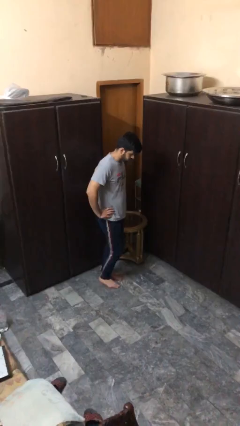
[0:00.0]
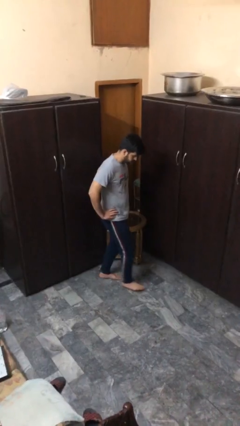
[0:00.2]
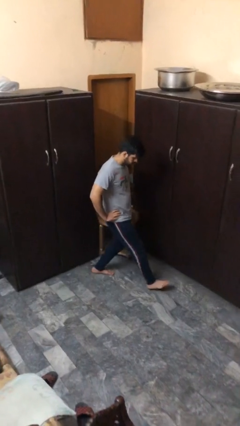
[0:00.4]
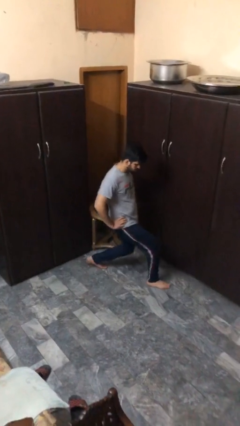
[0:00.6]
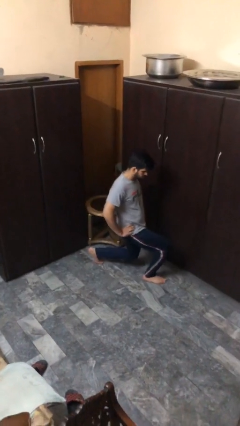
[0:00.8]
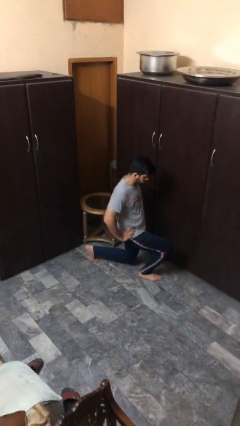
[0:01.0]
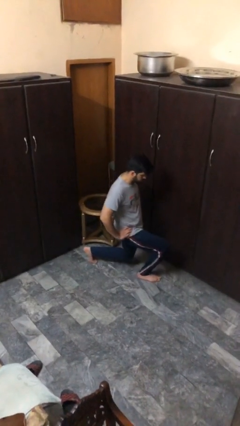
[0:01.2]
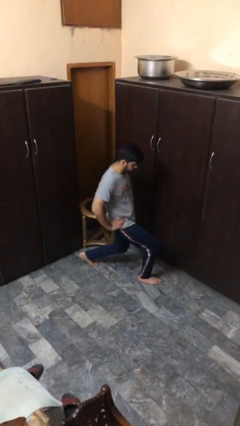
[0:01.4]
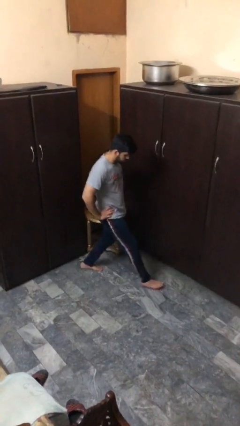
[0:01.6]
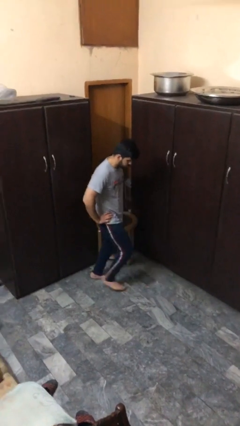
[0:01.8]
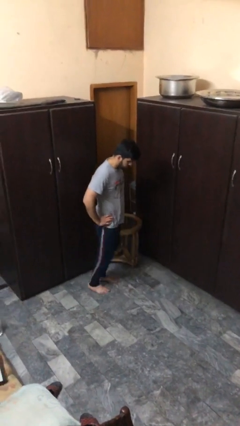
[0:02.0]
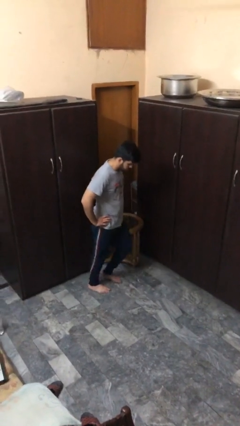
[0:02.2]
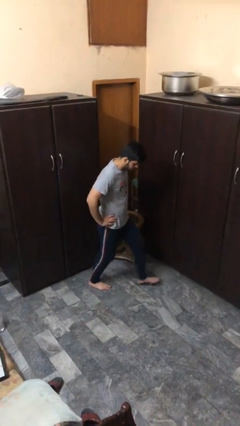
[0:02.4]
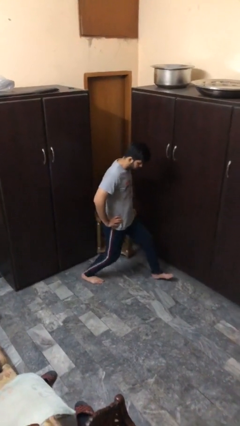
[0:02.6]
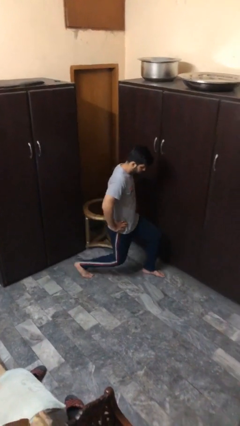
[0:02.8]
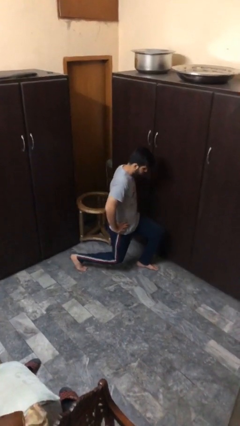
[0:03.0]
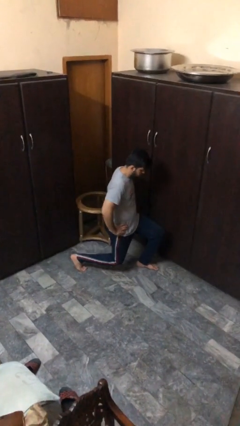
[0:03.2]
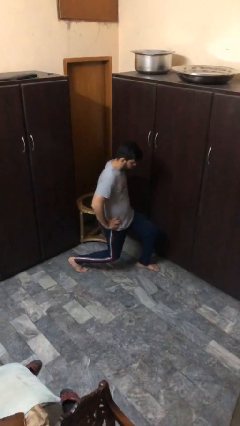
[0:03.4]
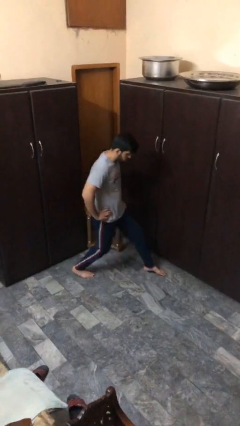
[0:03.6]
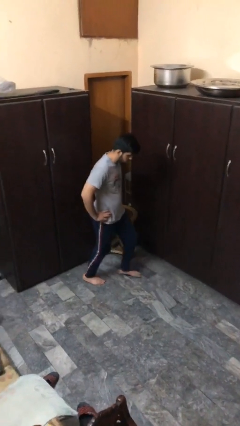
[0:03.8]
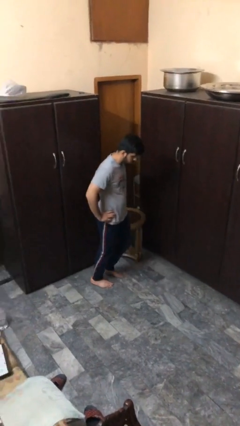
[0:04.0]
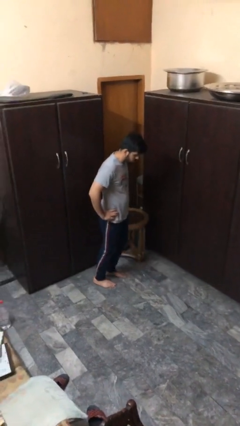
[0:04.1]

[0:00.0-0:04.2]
person exercises with lunges

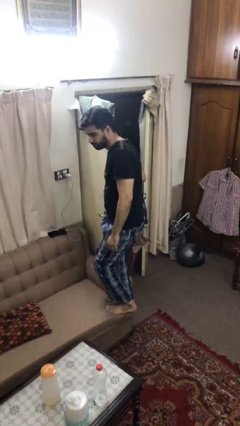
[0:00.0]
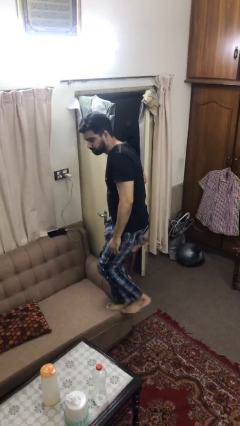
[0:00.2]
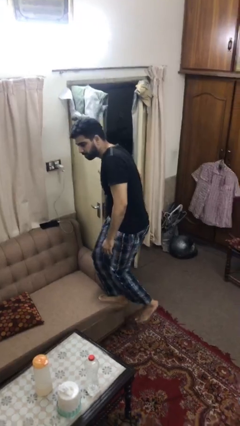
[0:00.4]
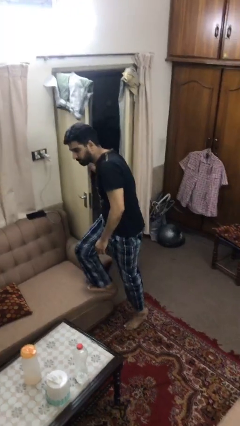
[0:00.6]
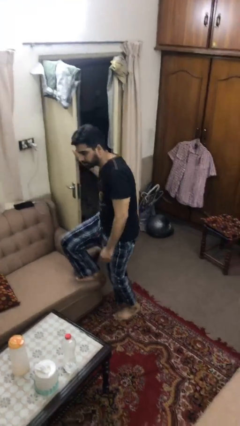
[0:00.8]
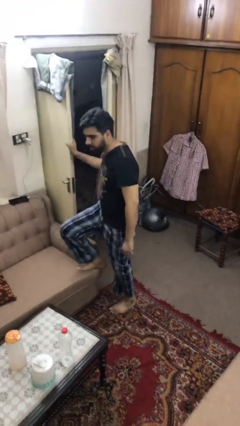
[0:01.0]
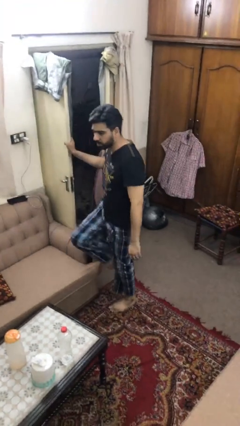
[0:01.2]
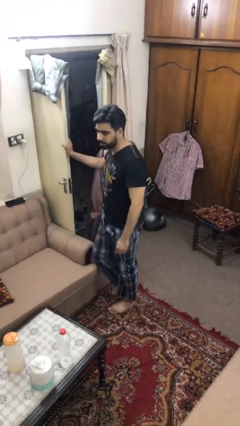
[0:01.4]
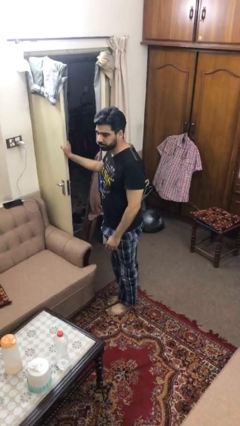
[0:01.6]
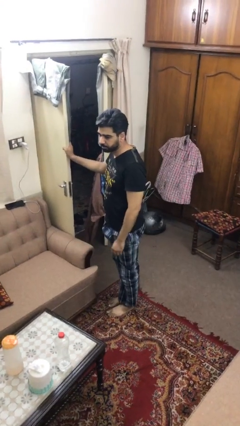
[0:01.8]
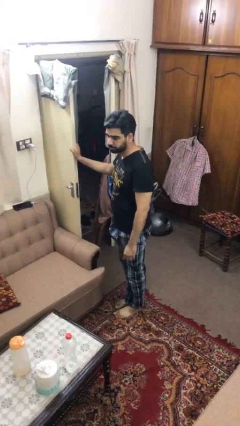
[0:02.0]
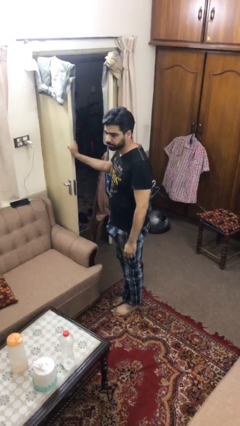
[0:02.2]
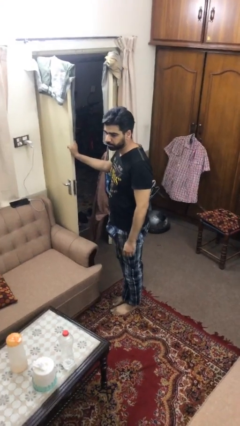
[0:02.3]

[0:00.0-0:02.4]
person climbs off couch

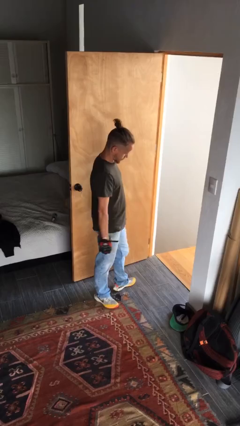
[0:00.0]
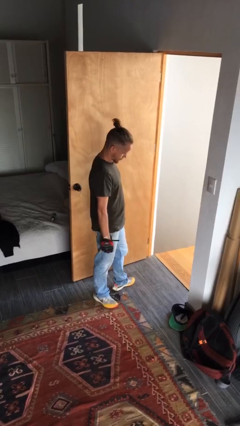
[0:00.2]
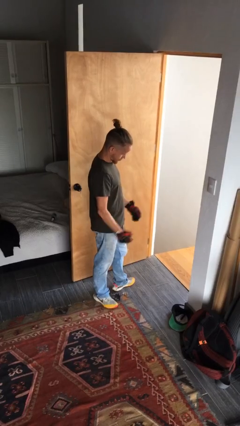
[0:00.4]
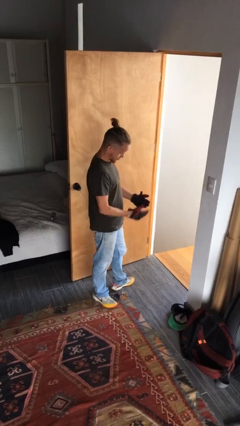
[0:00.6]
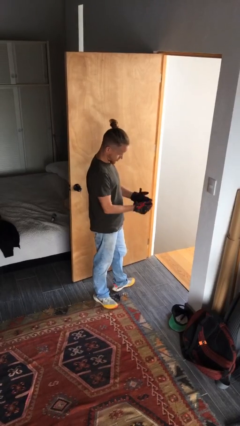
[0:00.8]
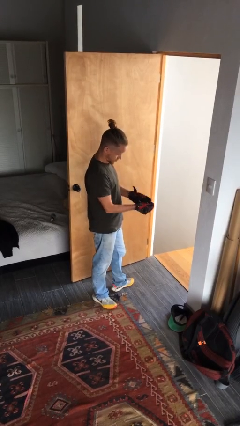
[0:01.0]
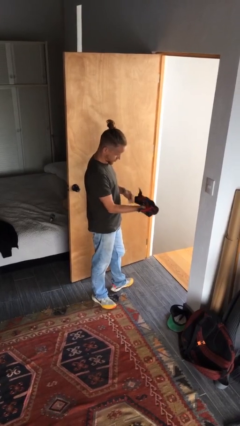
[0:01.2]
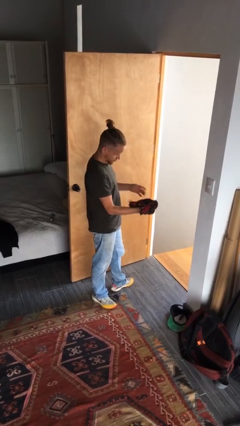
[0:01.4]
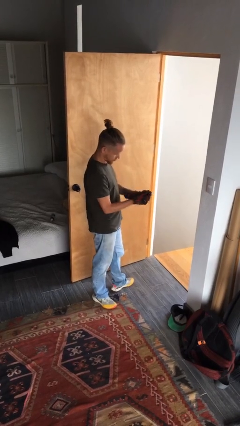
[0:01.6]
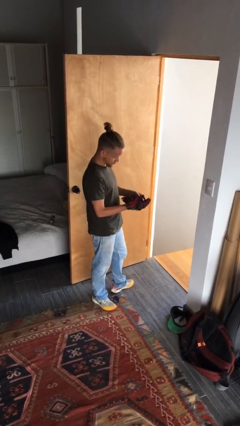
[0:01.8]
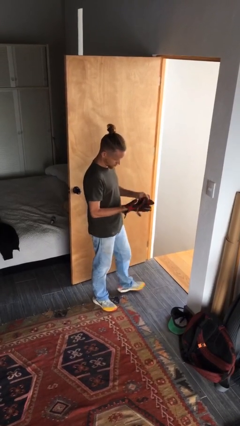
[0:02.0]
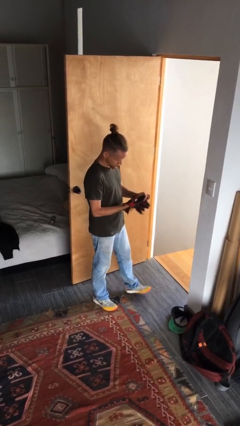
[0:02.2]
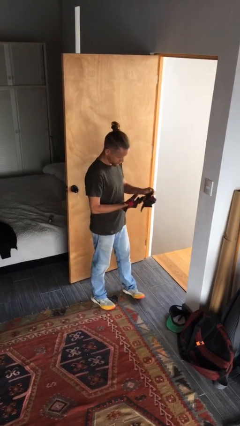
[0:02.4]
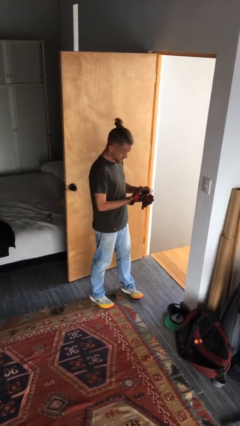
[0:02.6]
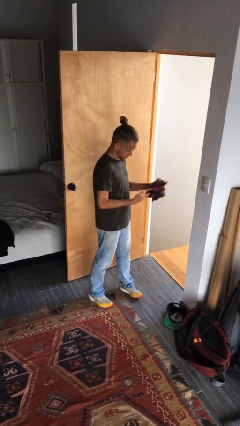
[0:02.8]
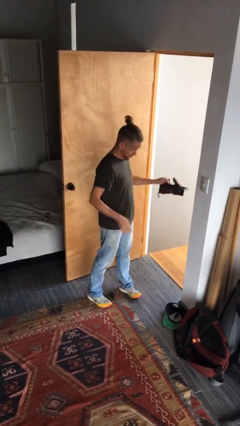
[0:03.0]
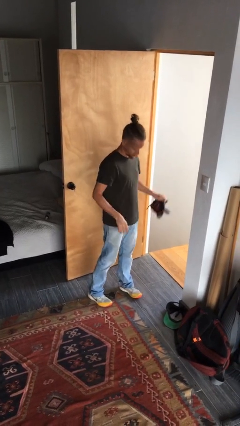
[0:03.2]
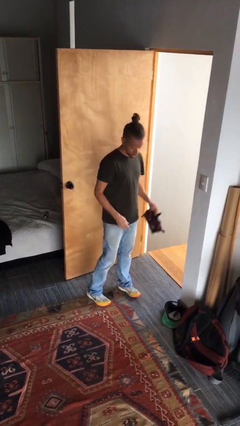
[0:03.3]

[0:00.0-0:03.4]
person takes off gloves

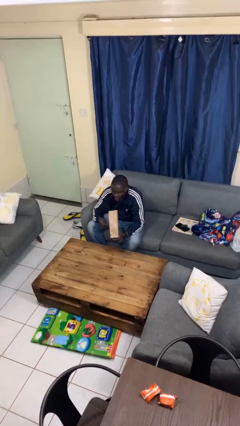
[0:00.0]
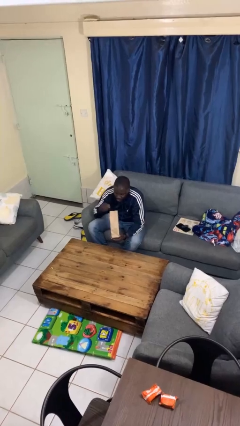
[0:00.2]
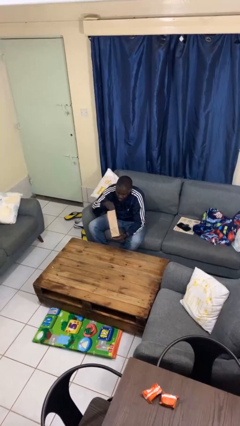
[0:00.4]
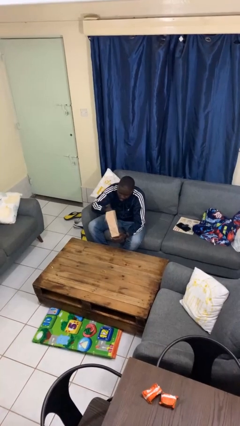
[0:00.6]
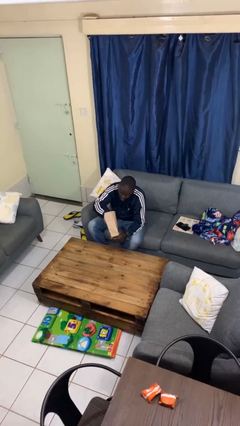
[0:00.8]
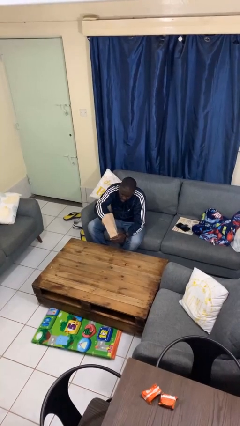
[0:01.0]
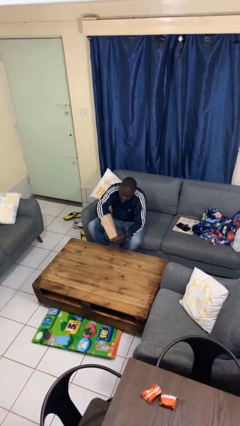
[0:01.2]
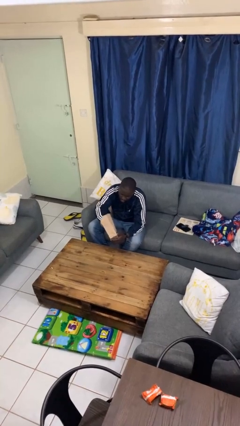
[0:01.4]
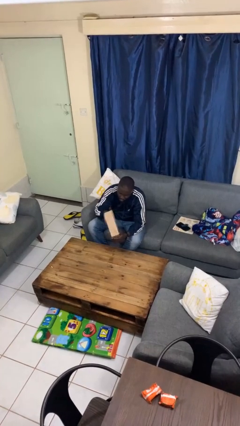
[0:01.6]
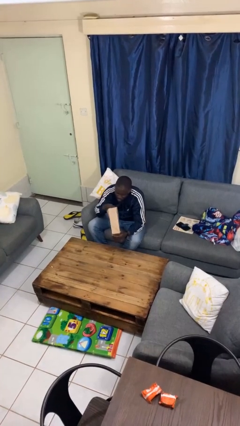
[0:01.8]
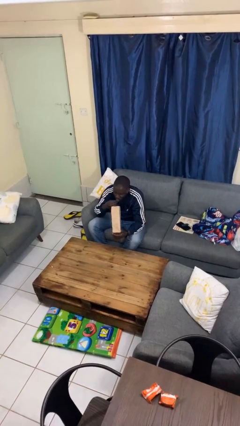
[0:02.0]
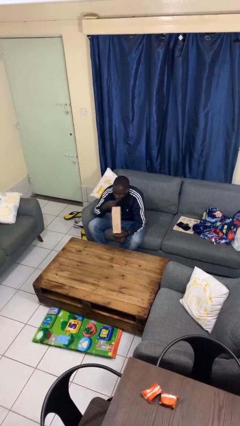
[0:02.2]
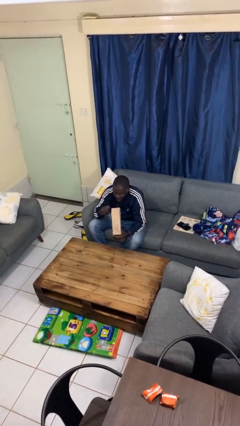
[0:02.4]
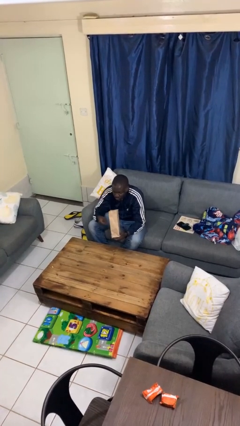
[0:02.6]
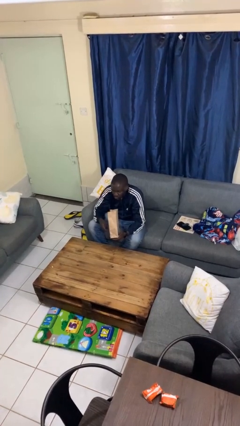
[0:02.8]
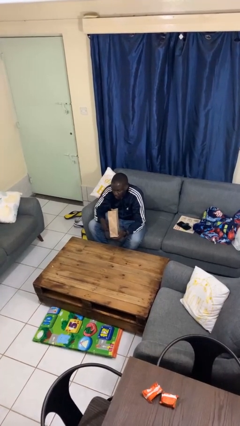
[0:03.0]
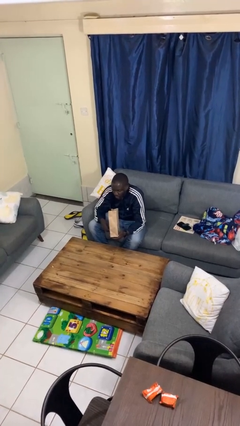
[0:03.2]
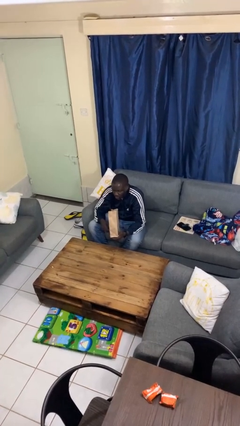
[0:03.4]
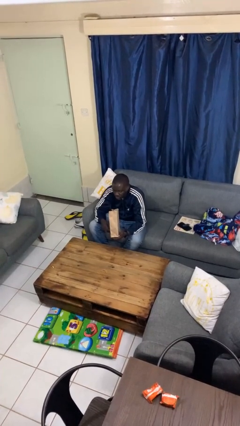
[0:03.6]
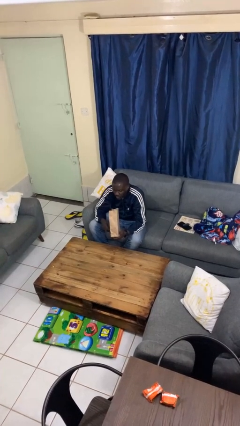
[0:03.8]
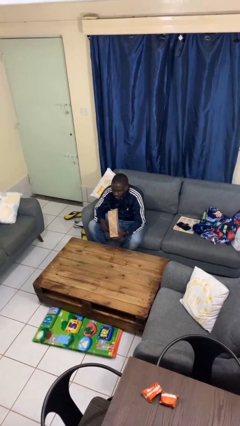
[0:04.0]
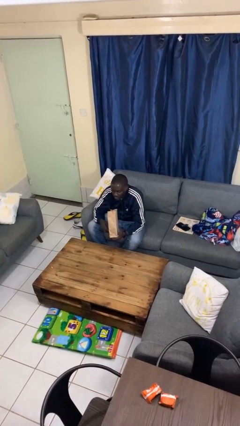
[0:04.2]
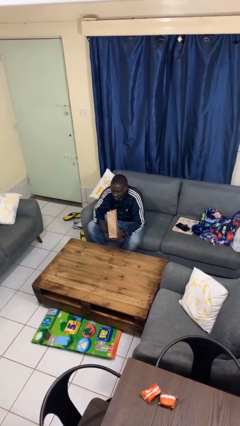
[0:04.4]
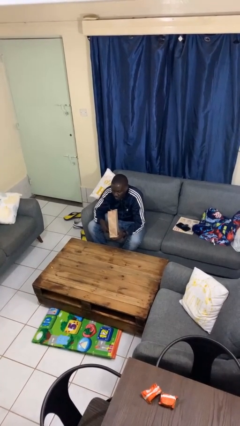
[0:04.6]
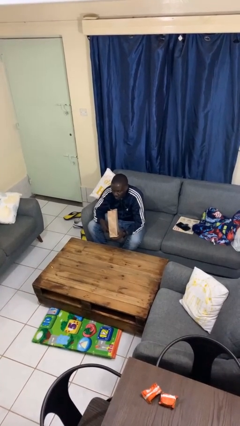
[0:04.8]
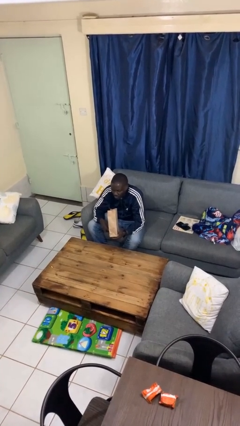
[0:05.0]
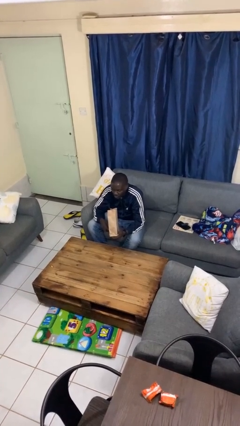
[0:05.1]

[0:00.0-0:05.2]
person eats snack from bag

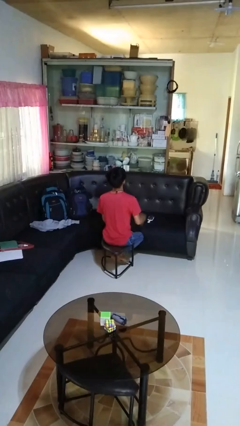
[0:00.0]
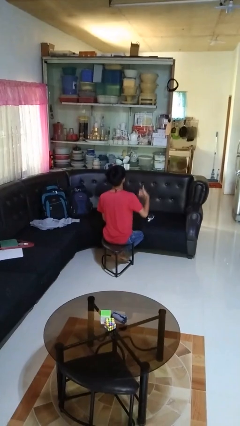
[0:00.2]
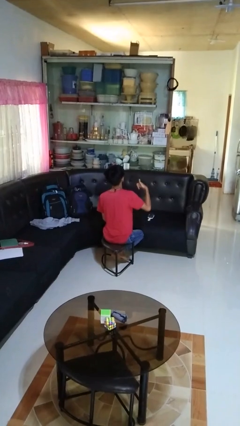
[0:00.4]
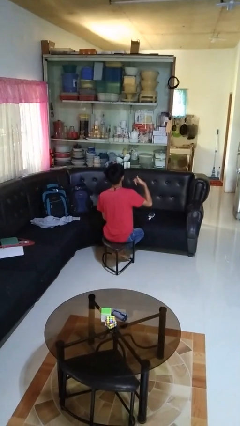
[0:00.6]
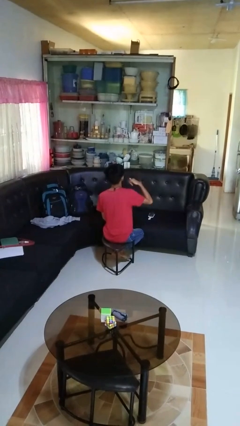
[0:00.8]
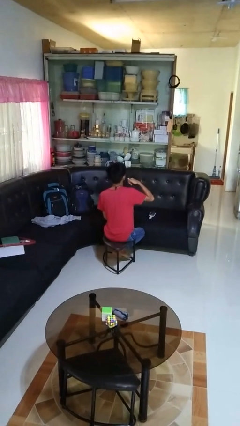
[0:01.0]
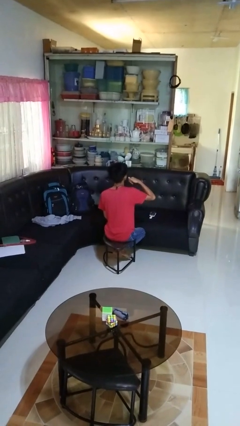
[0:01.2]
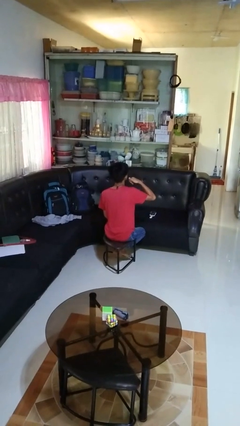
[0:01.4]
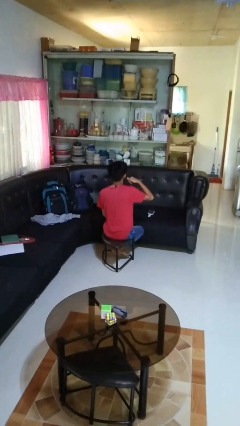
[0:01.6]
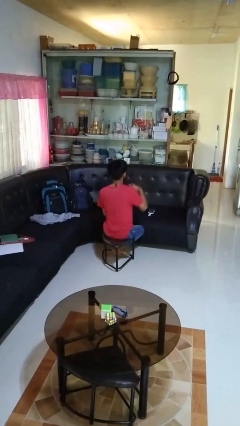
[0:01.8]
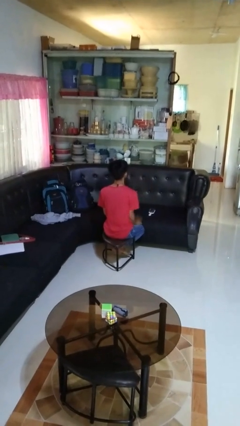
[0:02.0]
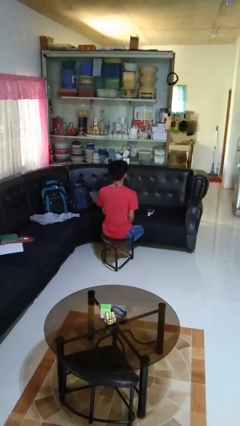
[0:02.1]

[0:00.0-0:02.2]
person gestures call me

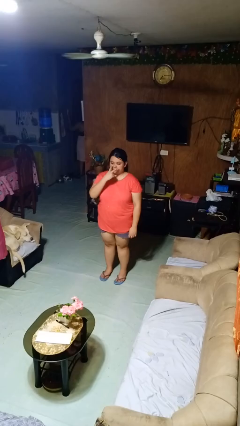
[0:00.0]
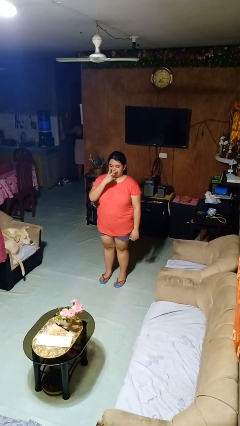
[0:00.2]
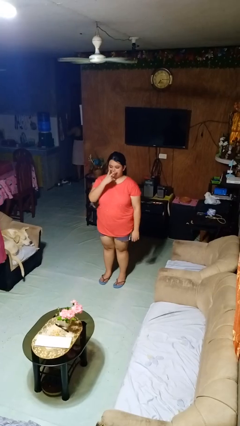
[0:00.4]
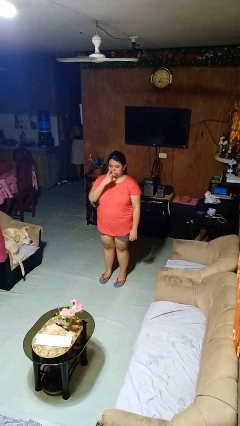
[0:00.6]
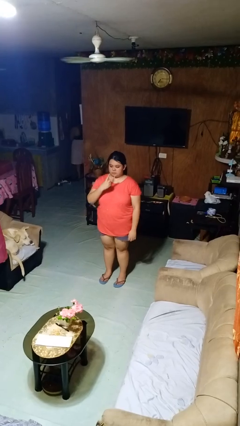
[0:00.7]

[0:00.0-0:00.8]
person gestures watch closely
